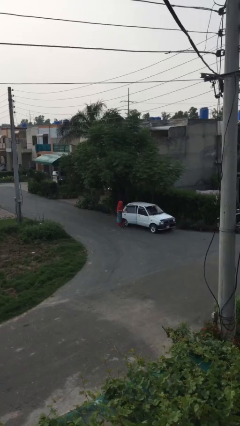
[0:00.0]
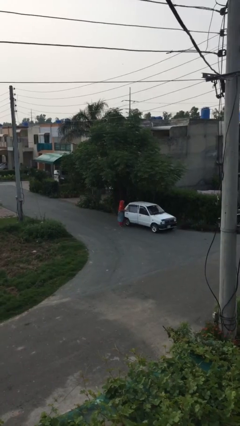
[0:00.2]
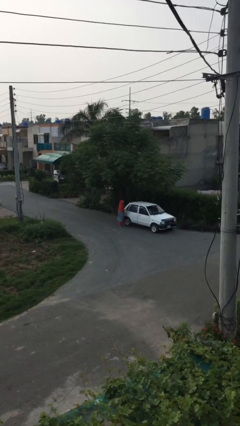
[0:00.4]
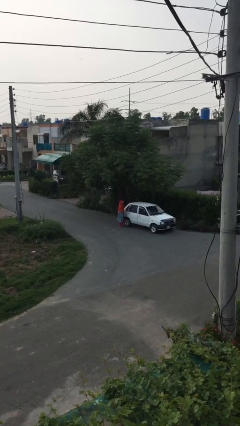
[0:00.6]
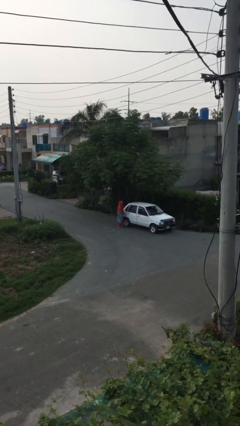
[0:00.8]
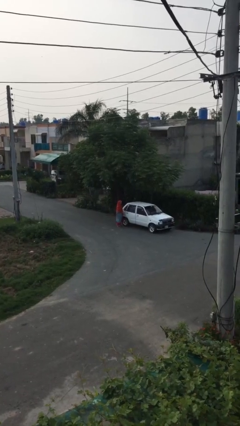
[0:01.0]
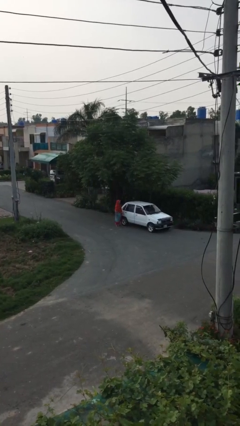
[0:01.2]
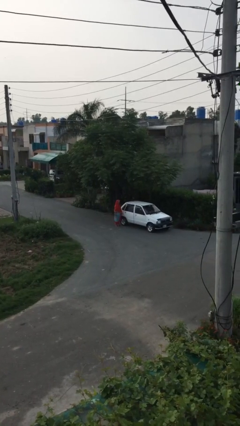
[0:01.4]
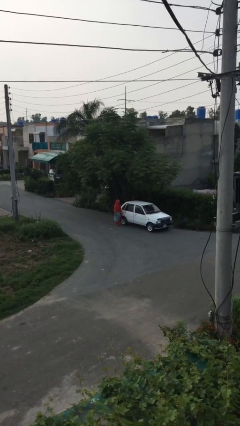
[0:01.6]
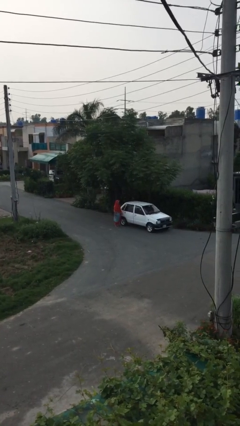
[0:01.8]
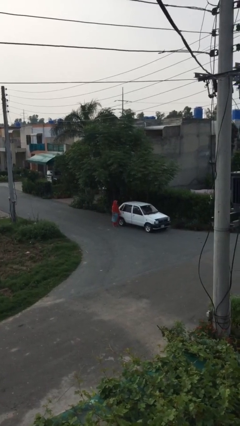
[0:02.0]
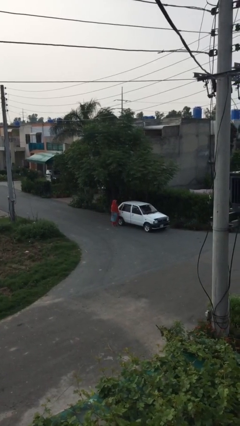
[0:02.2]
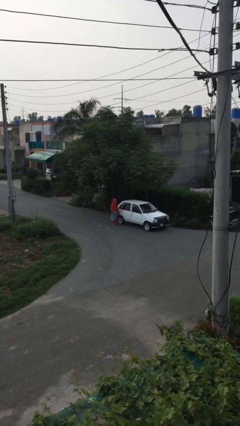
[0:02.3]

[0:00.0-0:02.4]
person closes car door

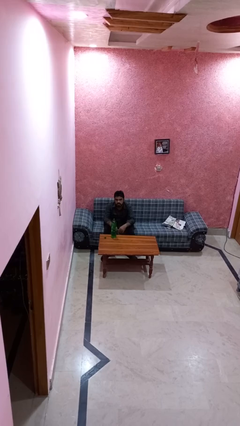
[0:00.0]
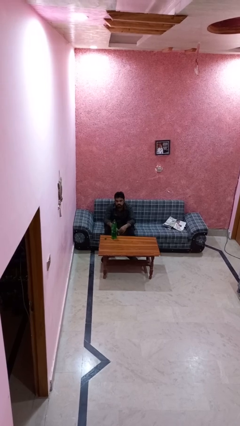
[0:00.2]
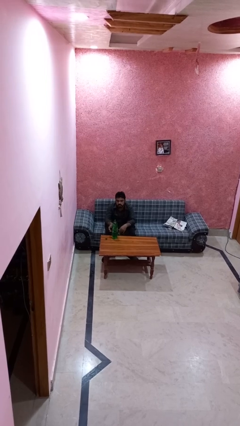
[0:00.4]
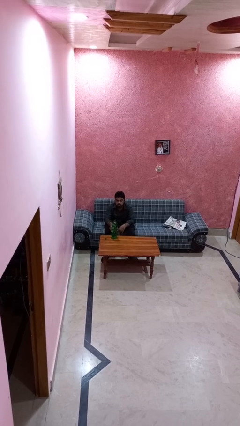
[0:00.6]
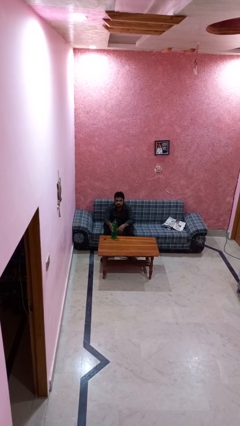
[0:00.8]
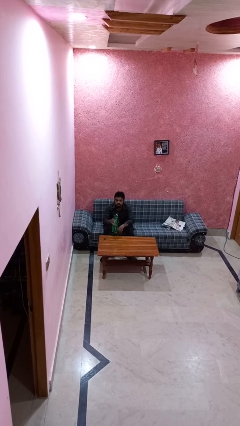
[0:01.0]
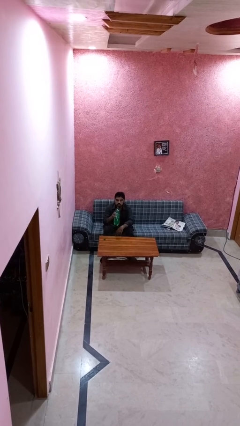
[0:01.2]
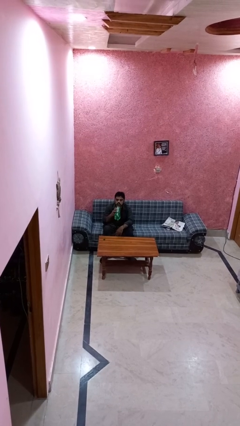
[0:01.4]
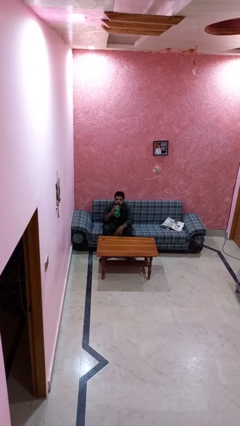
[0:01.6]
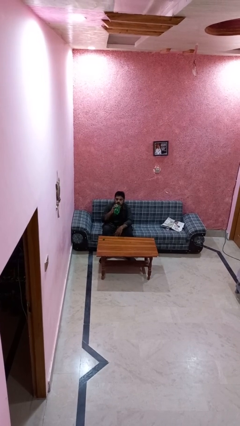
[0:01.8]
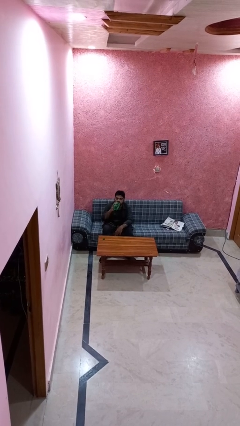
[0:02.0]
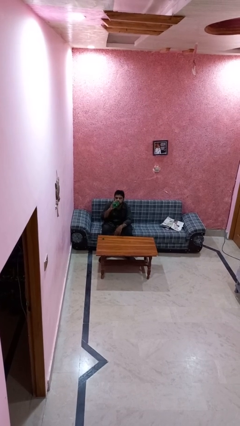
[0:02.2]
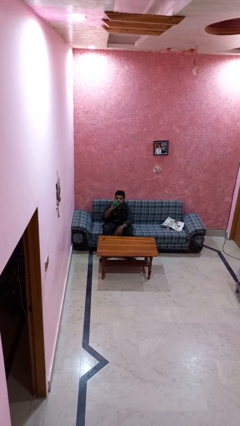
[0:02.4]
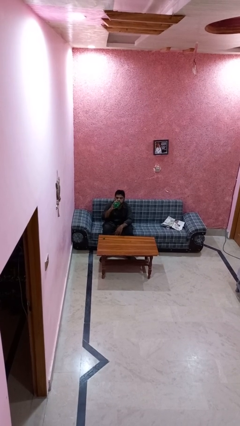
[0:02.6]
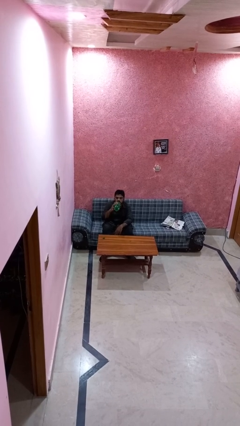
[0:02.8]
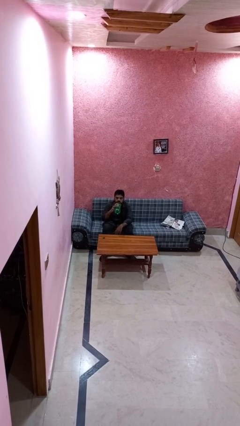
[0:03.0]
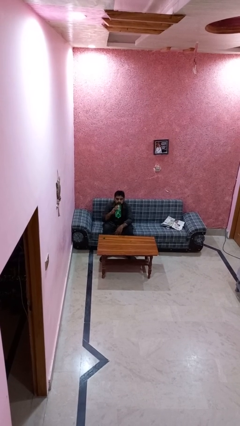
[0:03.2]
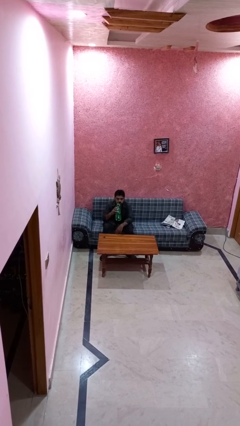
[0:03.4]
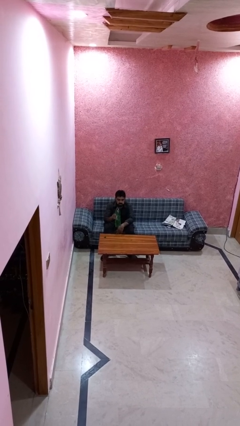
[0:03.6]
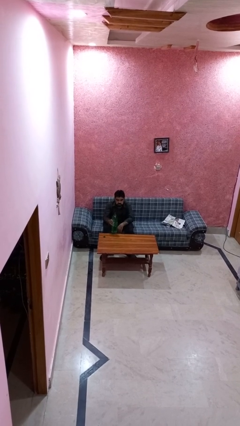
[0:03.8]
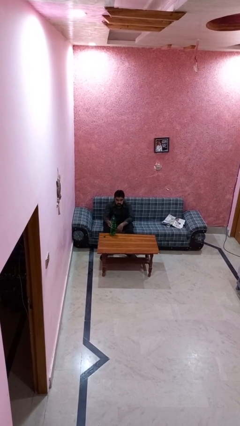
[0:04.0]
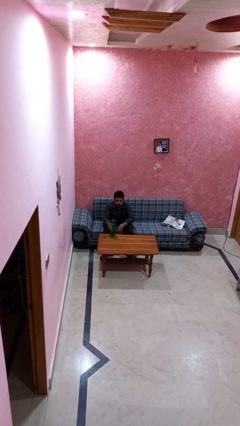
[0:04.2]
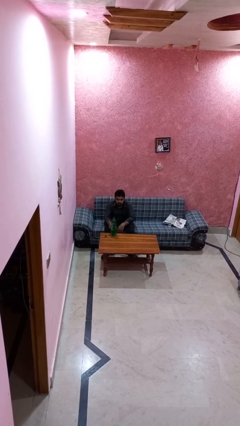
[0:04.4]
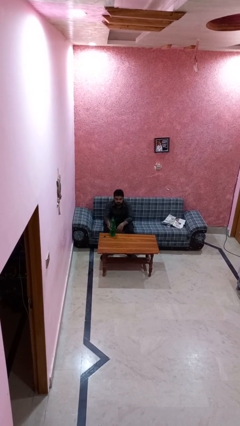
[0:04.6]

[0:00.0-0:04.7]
person drinks from bottle

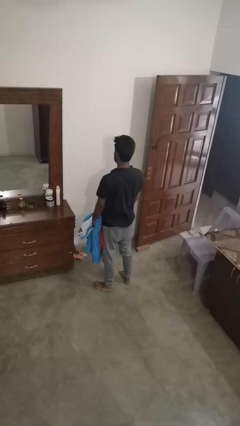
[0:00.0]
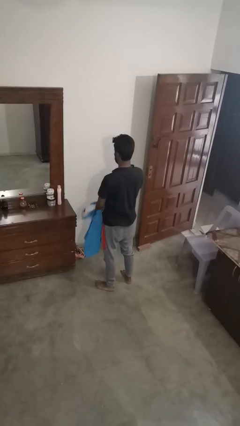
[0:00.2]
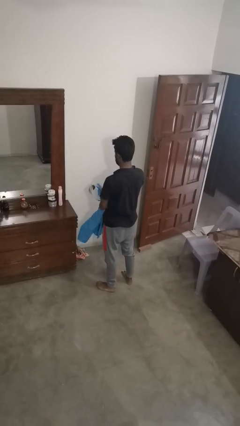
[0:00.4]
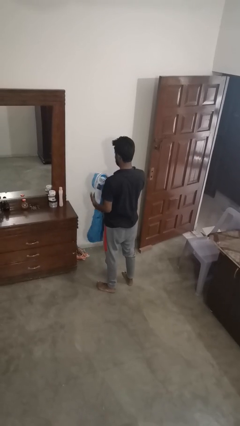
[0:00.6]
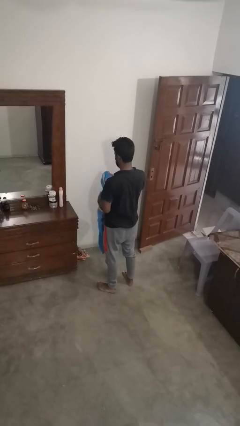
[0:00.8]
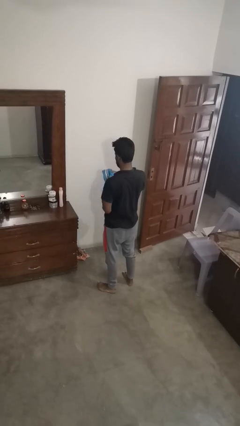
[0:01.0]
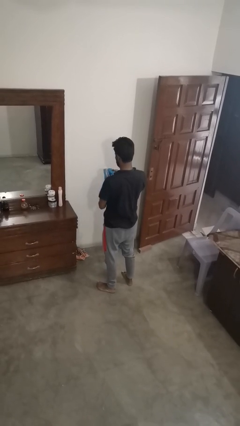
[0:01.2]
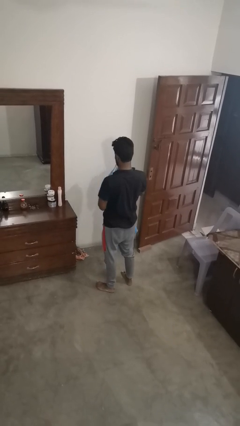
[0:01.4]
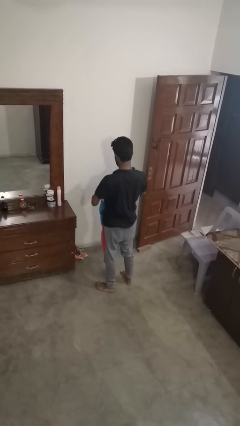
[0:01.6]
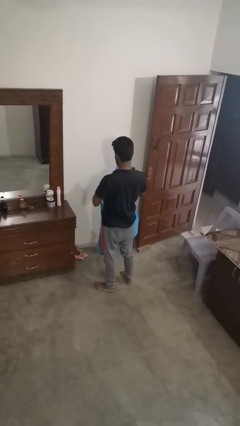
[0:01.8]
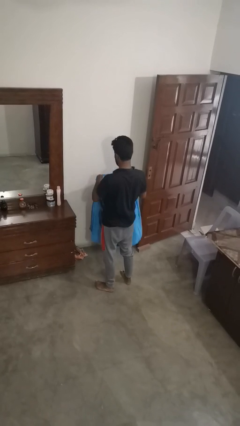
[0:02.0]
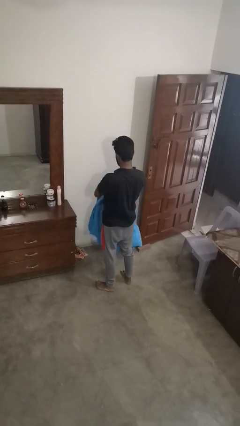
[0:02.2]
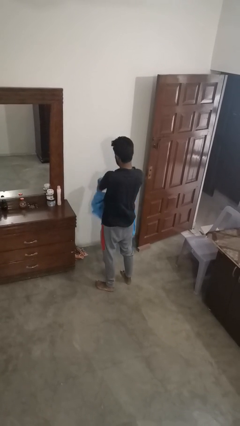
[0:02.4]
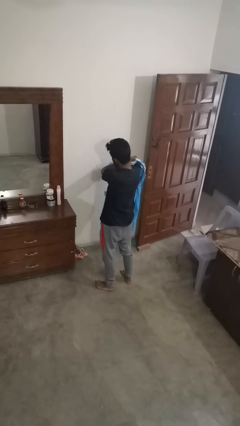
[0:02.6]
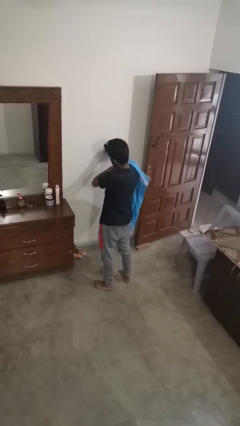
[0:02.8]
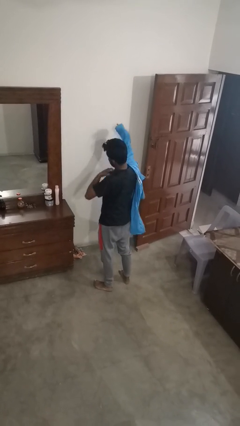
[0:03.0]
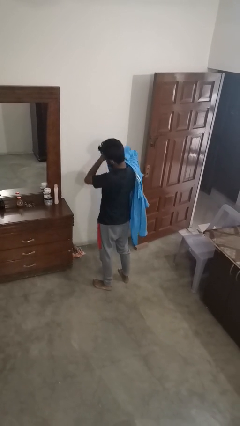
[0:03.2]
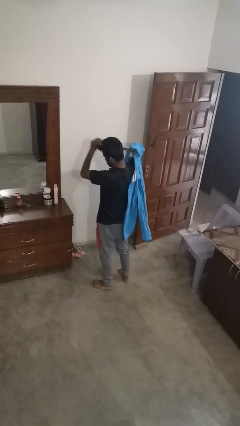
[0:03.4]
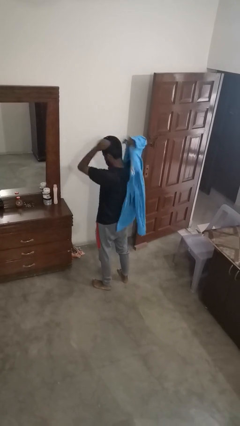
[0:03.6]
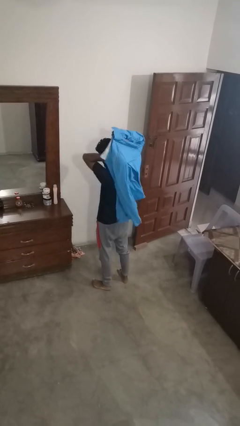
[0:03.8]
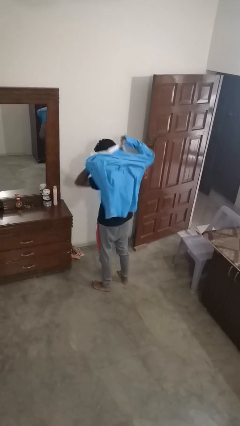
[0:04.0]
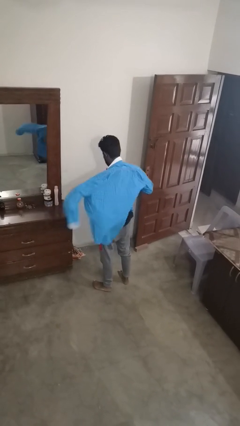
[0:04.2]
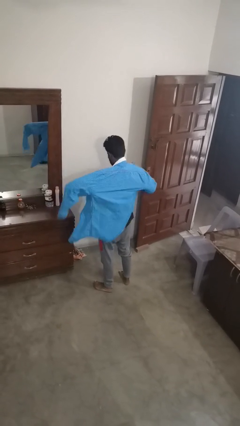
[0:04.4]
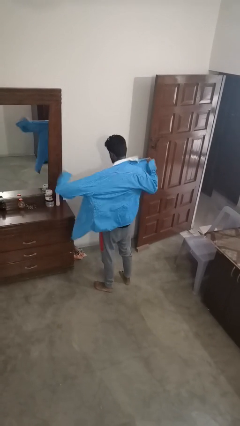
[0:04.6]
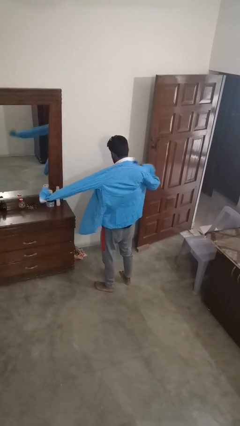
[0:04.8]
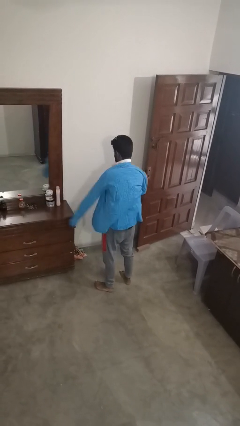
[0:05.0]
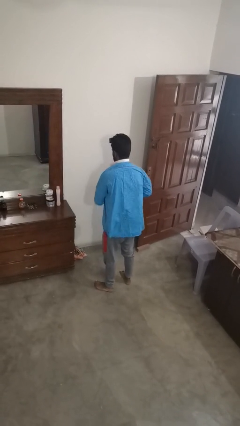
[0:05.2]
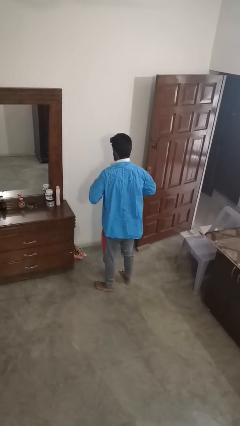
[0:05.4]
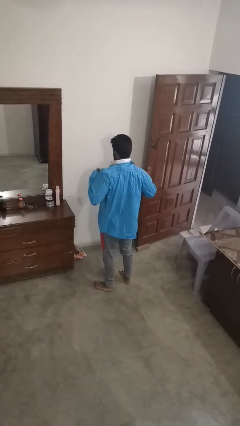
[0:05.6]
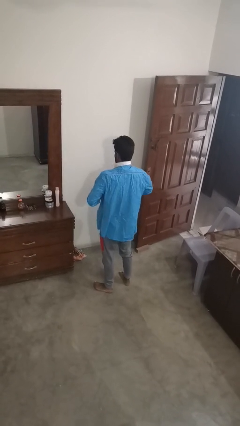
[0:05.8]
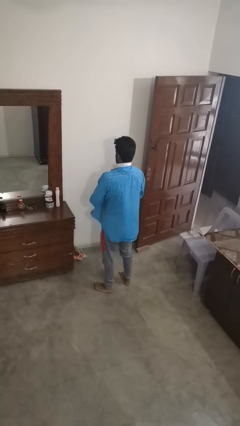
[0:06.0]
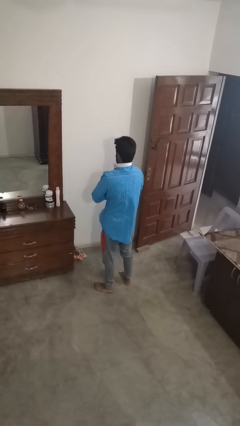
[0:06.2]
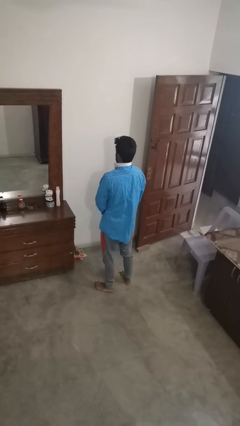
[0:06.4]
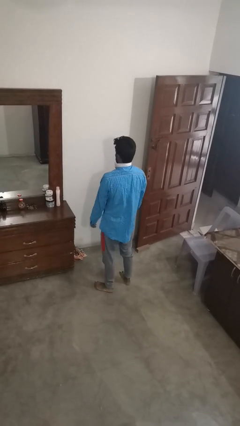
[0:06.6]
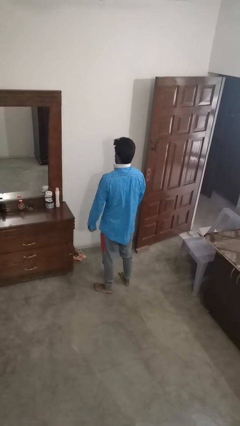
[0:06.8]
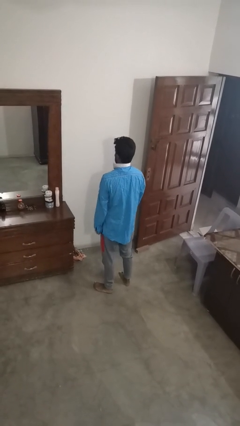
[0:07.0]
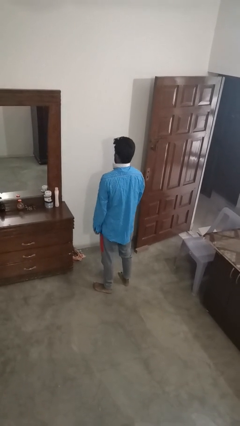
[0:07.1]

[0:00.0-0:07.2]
person puts on shirt

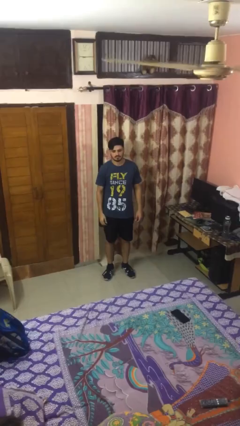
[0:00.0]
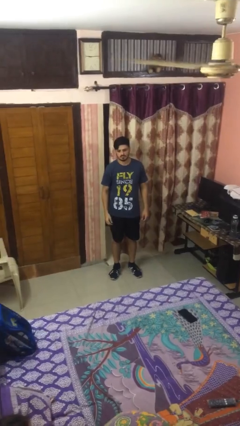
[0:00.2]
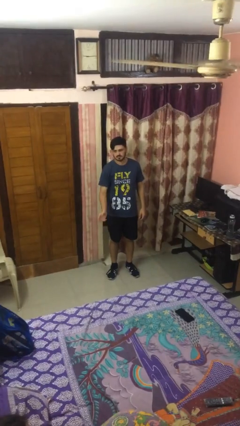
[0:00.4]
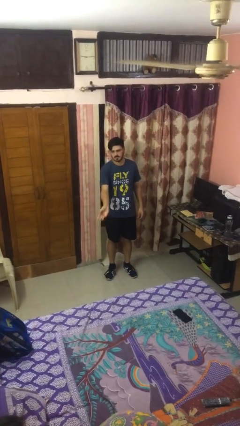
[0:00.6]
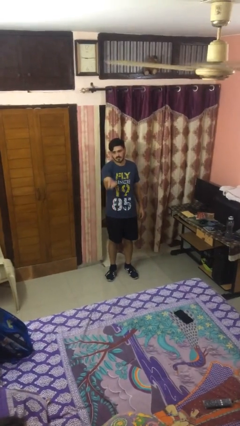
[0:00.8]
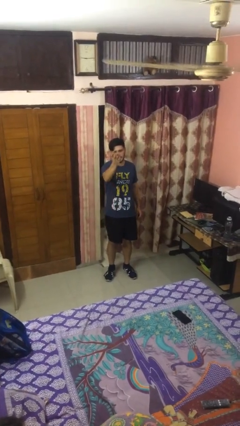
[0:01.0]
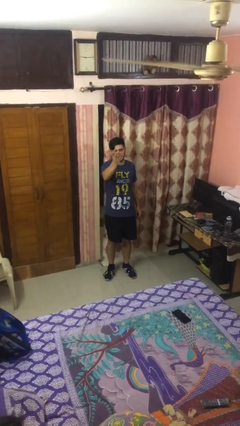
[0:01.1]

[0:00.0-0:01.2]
person gestures swipe up

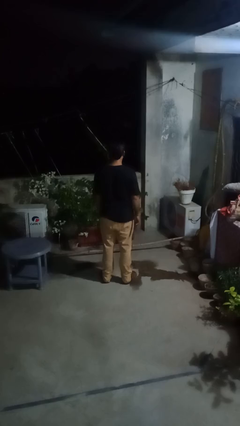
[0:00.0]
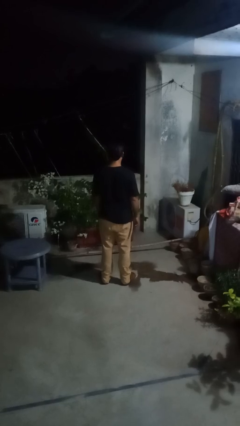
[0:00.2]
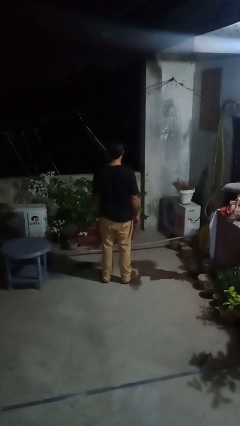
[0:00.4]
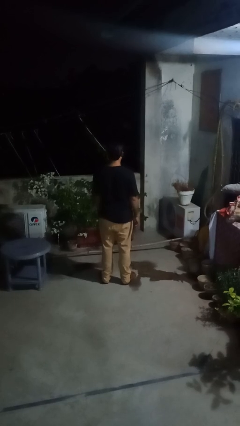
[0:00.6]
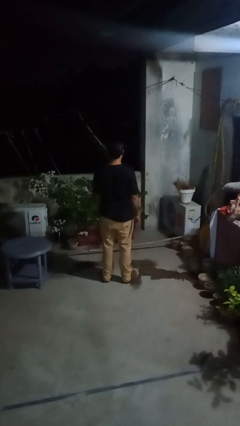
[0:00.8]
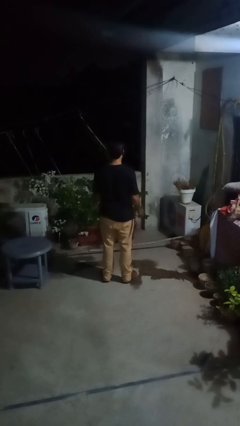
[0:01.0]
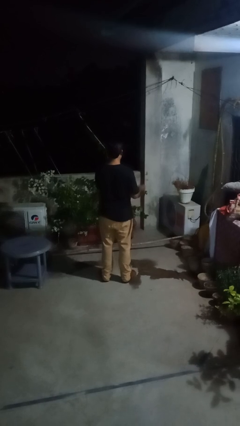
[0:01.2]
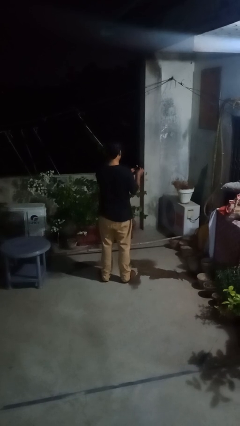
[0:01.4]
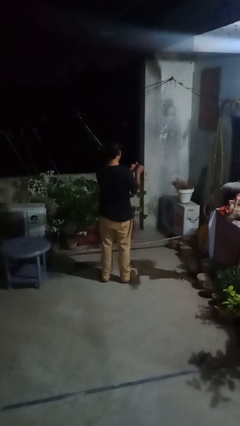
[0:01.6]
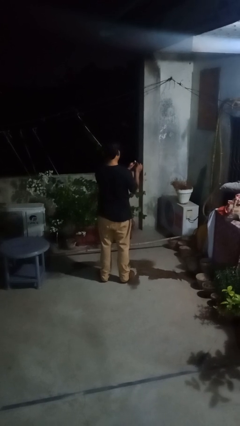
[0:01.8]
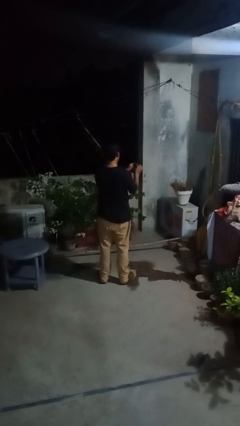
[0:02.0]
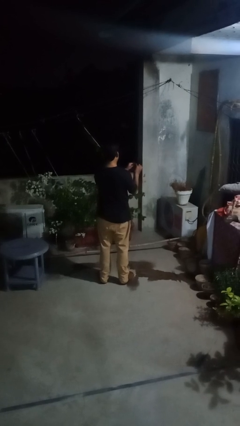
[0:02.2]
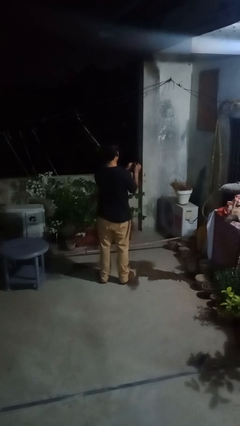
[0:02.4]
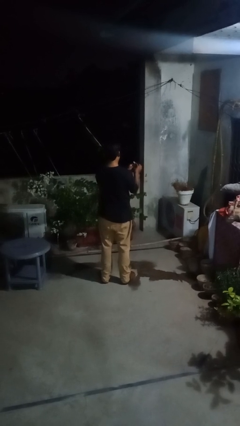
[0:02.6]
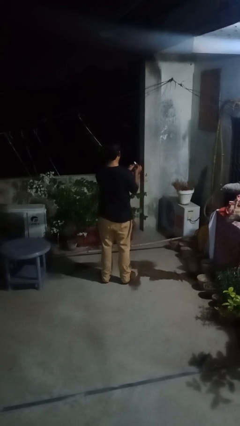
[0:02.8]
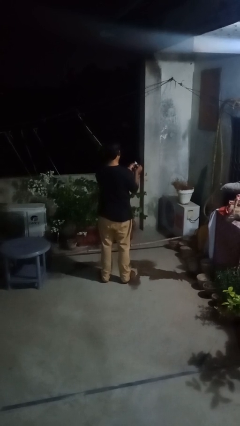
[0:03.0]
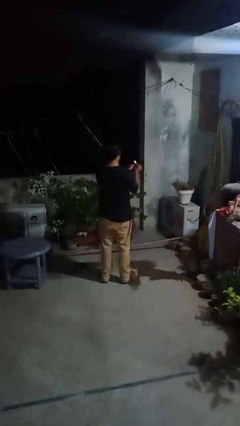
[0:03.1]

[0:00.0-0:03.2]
person files fingernails
